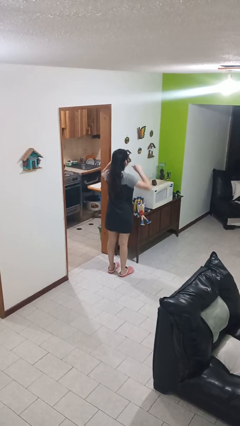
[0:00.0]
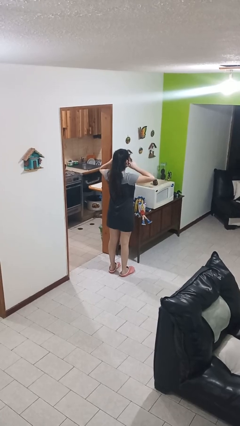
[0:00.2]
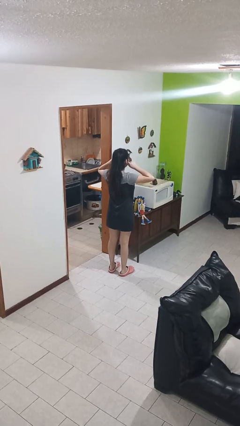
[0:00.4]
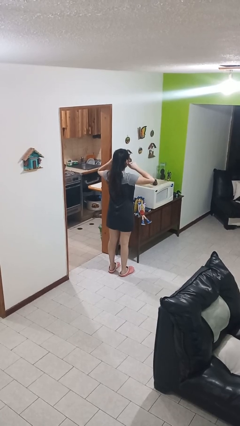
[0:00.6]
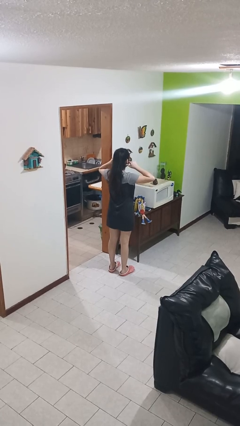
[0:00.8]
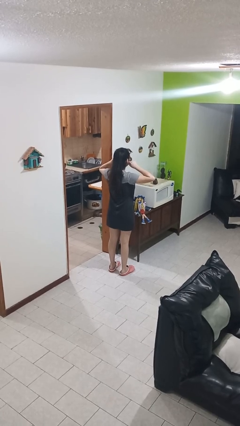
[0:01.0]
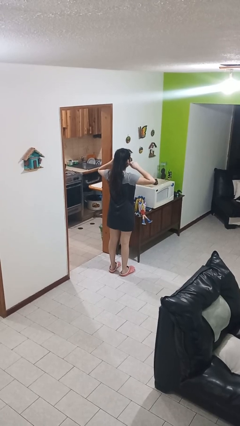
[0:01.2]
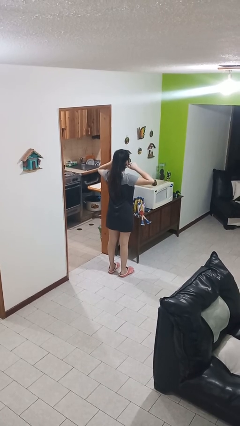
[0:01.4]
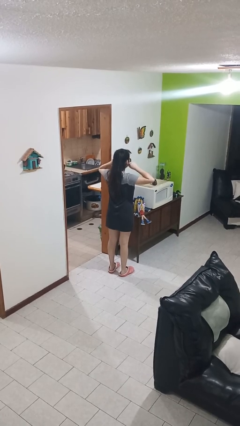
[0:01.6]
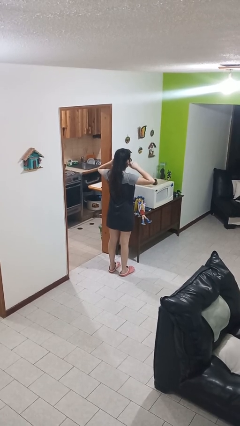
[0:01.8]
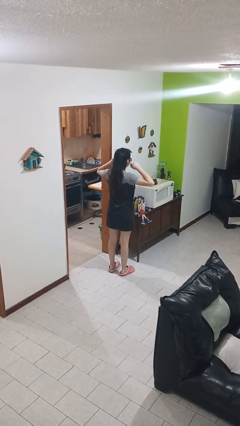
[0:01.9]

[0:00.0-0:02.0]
person touches earlobe

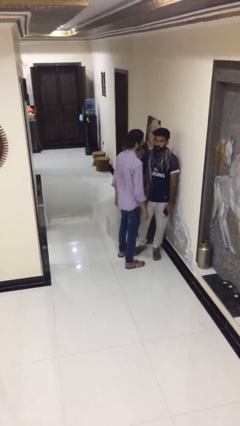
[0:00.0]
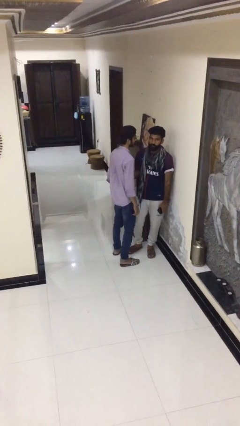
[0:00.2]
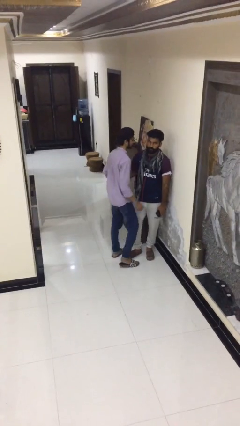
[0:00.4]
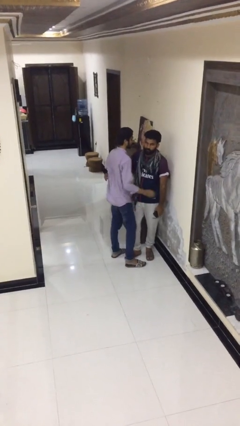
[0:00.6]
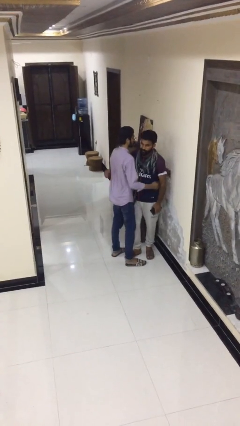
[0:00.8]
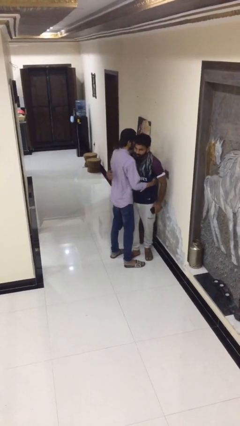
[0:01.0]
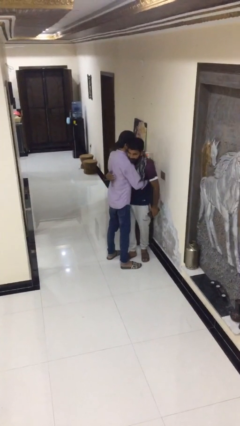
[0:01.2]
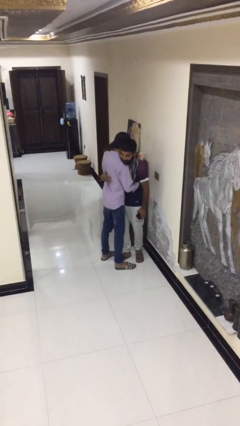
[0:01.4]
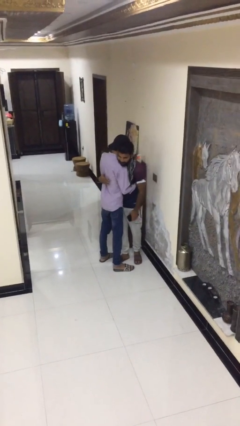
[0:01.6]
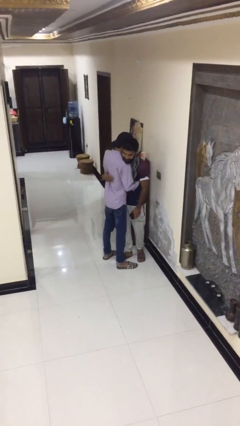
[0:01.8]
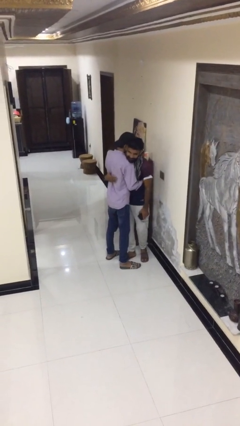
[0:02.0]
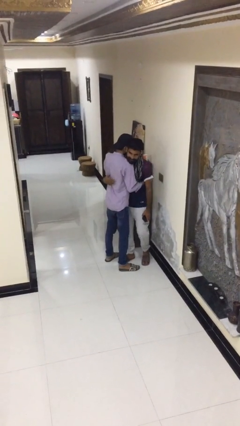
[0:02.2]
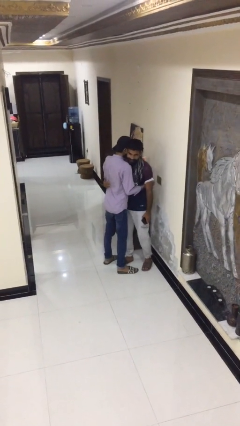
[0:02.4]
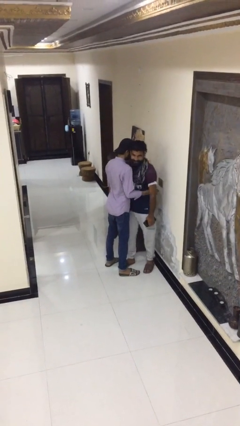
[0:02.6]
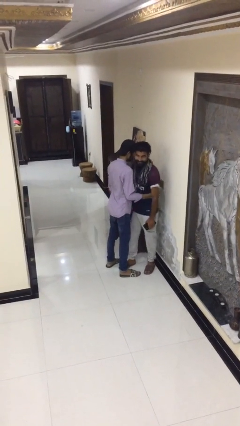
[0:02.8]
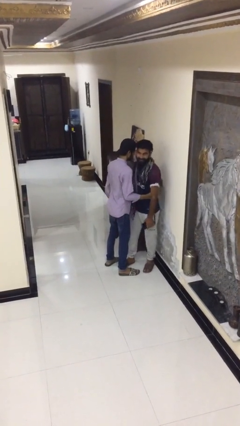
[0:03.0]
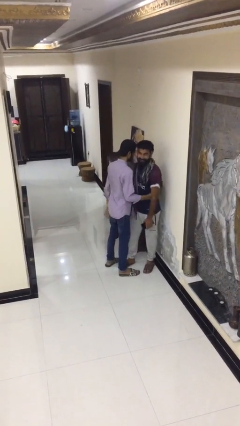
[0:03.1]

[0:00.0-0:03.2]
person embraces person

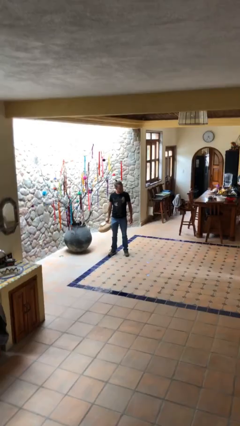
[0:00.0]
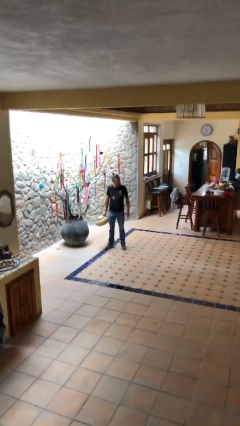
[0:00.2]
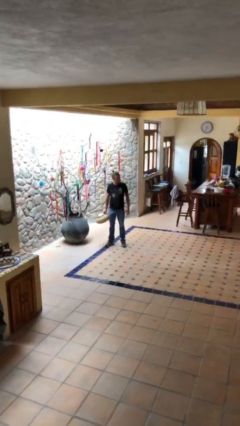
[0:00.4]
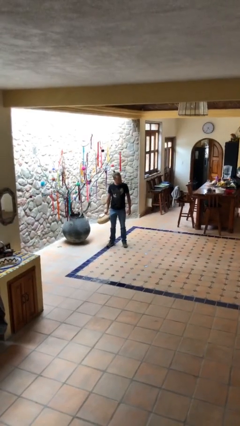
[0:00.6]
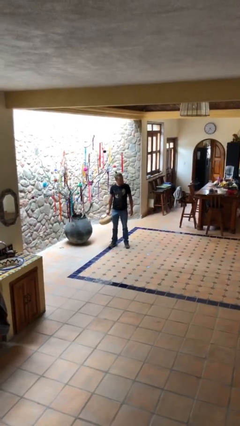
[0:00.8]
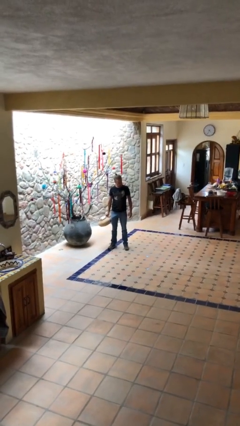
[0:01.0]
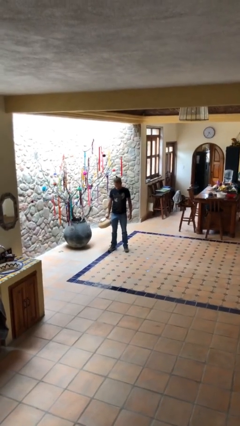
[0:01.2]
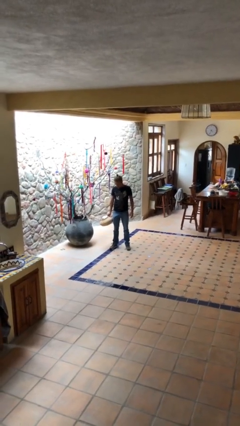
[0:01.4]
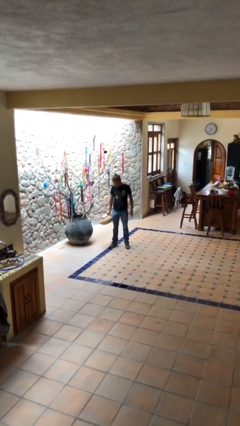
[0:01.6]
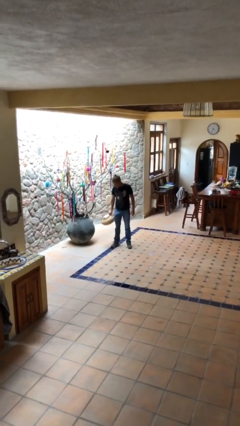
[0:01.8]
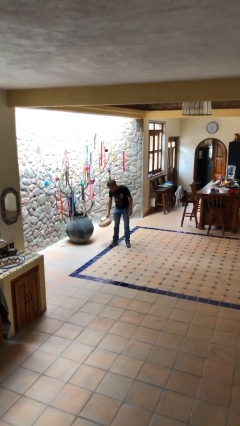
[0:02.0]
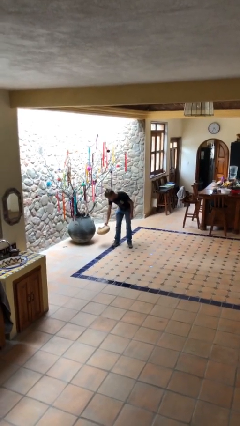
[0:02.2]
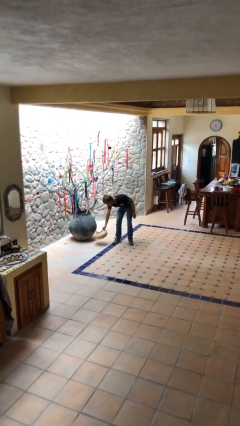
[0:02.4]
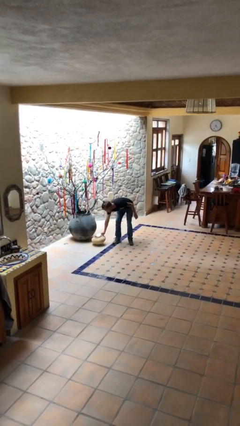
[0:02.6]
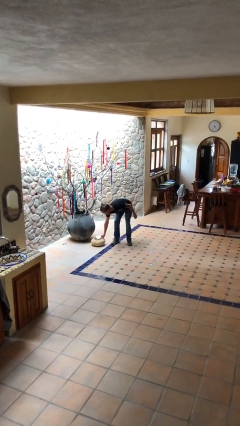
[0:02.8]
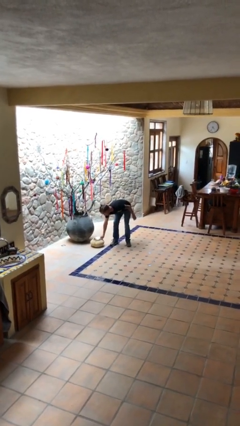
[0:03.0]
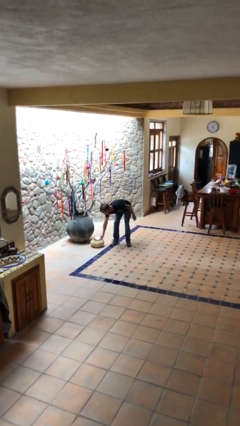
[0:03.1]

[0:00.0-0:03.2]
person puts down object on floor

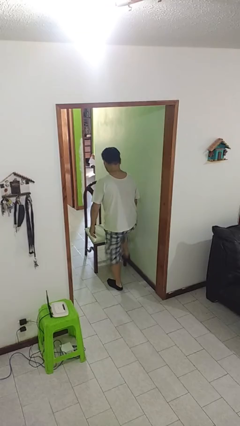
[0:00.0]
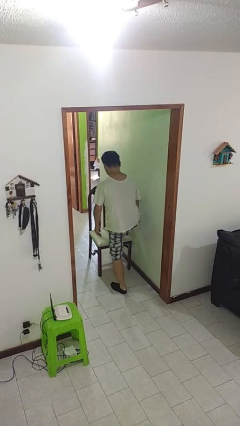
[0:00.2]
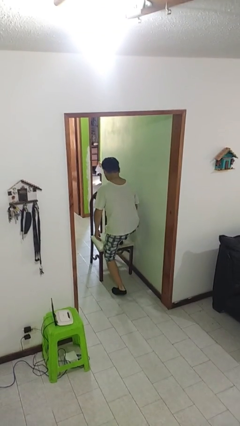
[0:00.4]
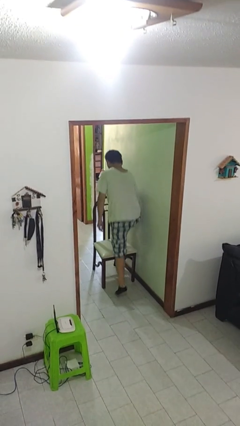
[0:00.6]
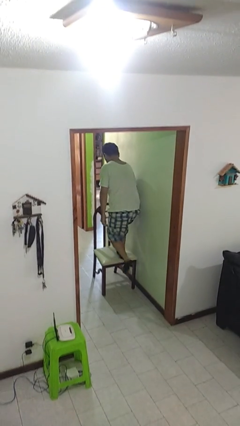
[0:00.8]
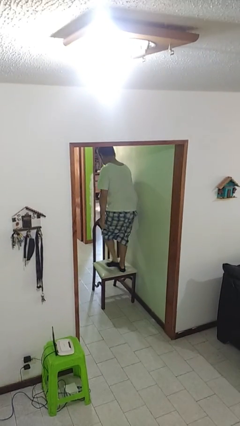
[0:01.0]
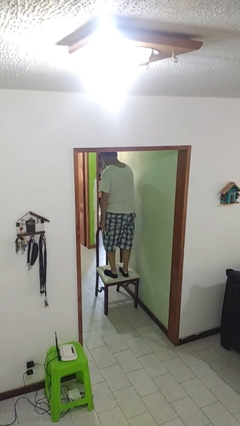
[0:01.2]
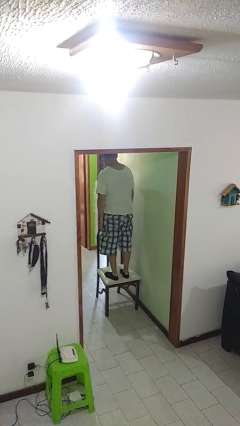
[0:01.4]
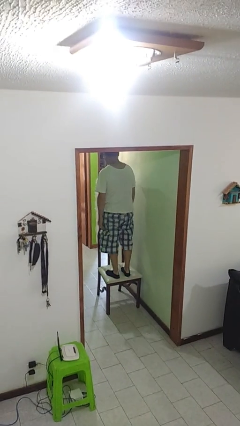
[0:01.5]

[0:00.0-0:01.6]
person climbs on chair

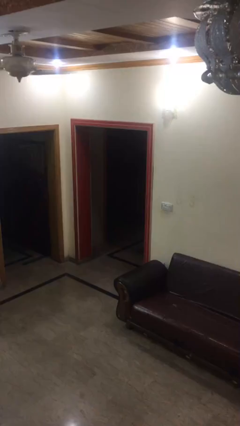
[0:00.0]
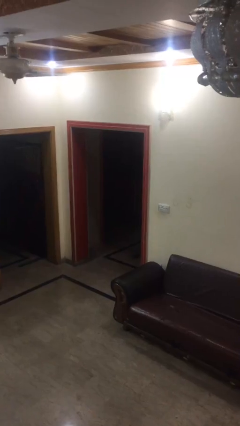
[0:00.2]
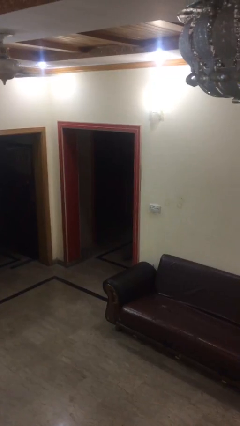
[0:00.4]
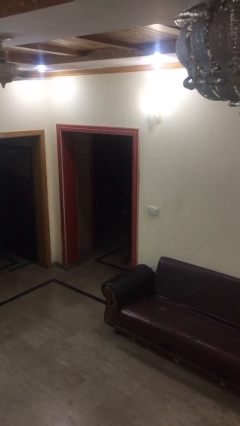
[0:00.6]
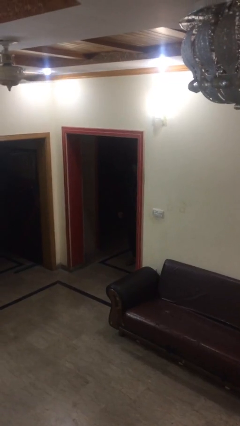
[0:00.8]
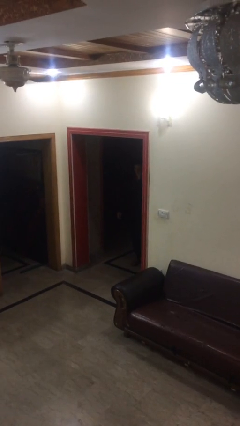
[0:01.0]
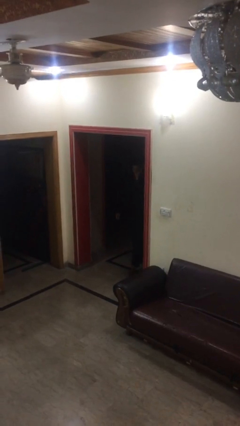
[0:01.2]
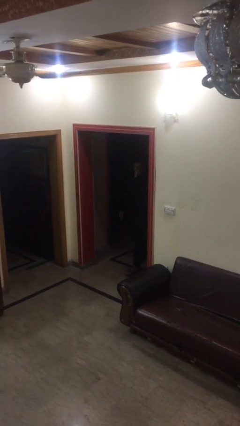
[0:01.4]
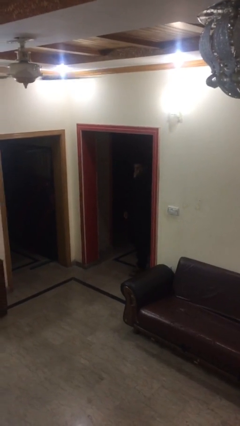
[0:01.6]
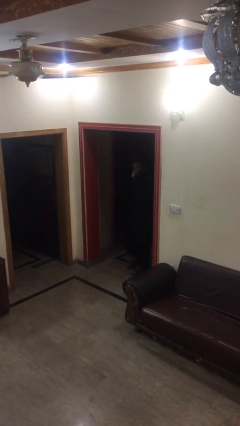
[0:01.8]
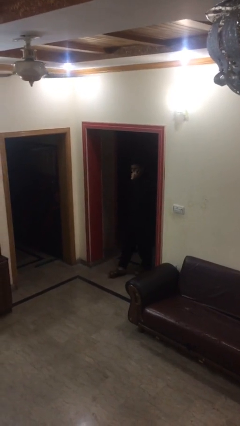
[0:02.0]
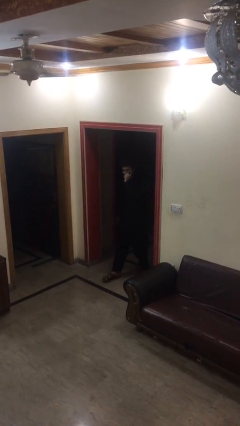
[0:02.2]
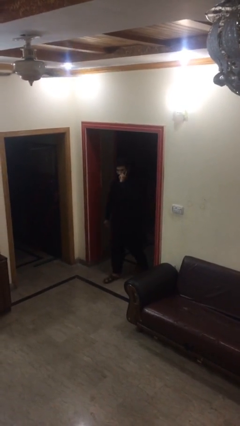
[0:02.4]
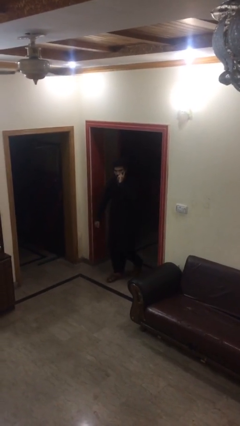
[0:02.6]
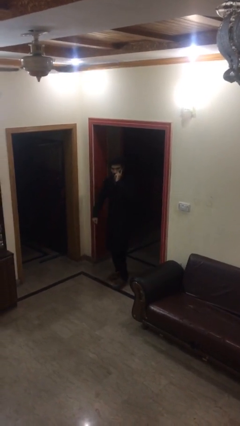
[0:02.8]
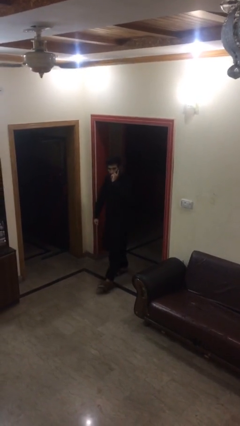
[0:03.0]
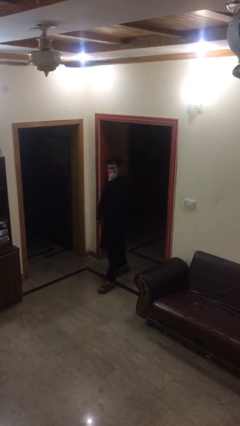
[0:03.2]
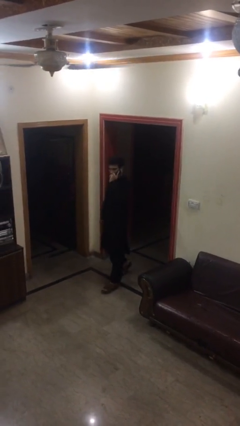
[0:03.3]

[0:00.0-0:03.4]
person enters scene through structure

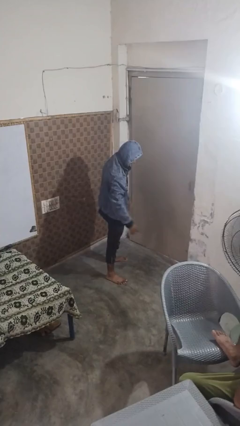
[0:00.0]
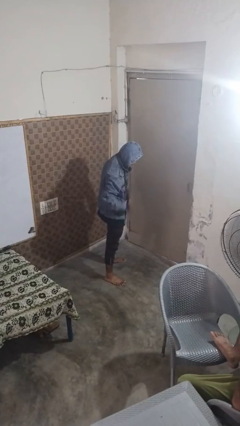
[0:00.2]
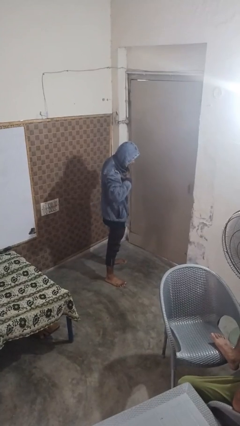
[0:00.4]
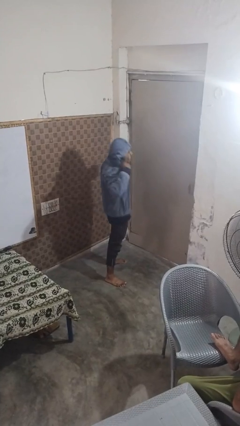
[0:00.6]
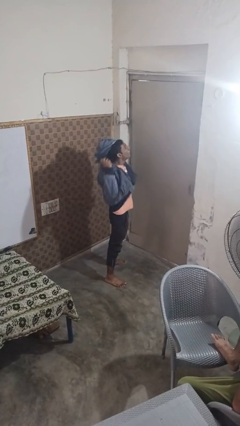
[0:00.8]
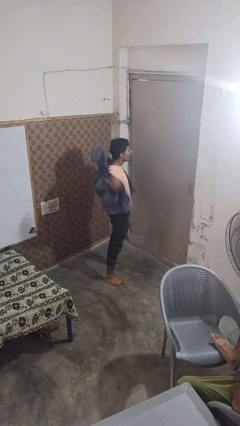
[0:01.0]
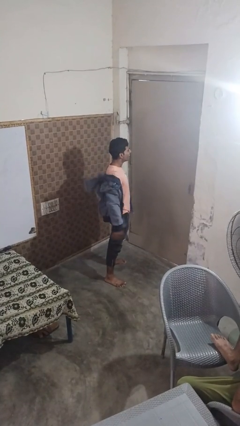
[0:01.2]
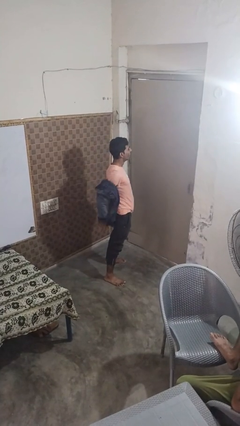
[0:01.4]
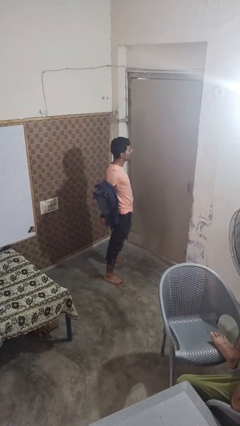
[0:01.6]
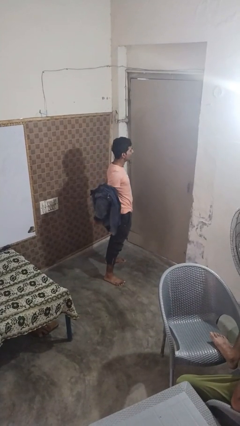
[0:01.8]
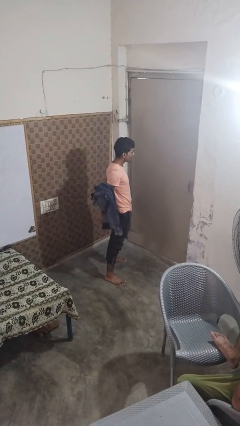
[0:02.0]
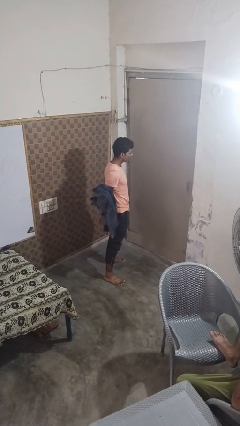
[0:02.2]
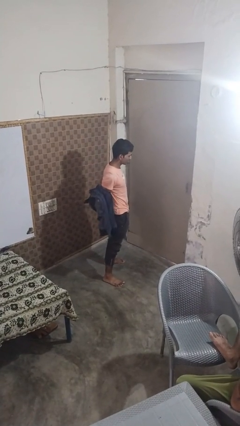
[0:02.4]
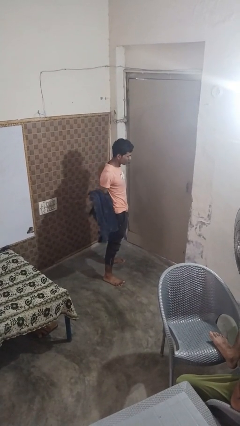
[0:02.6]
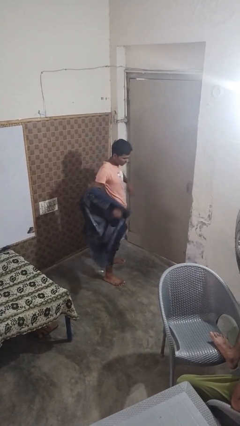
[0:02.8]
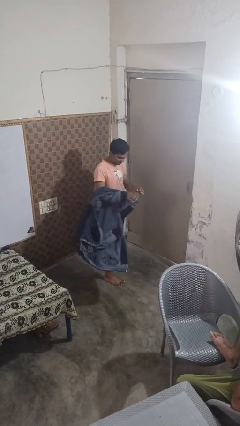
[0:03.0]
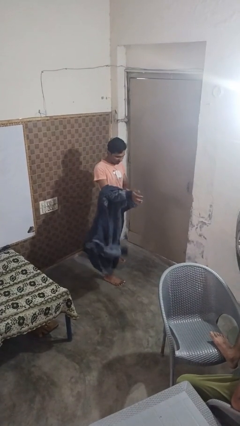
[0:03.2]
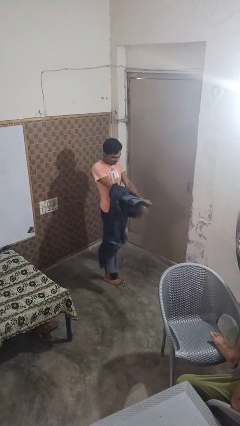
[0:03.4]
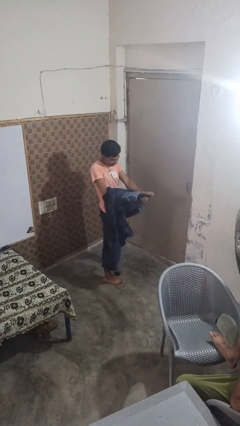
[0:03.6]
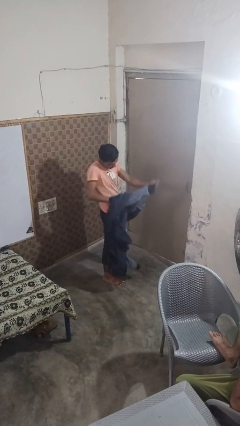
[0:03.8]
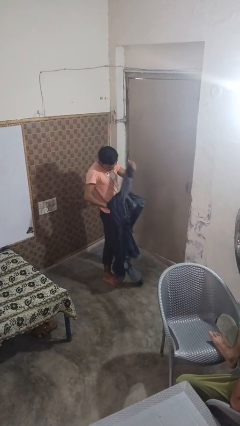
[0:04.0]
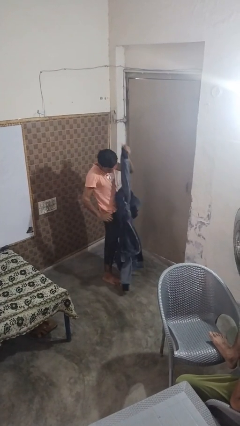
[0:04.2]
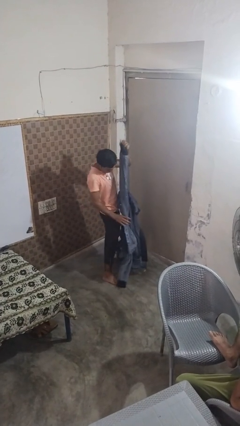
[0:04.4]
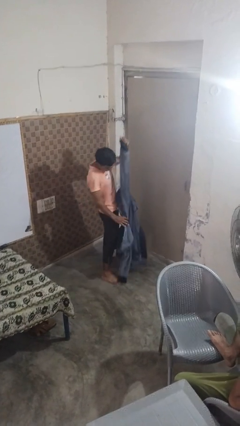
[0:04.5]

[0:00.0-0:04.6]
person takes off hoodie
